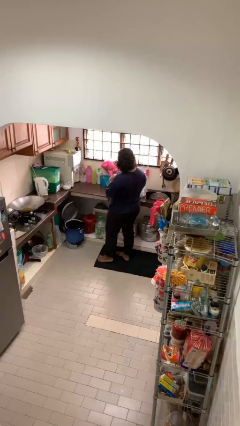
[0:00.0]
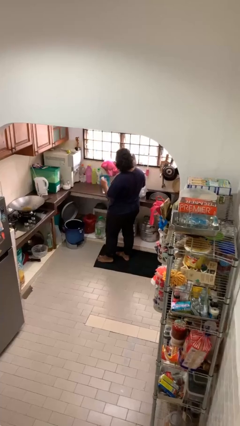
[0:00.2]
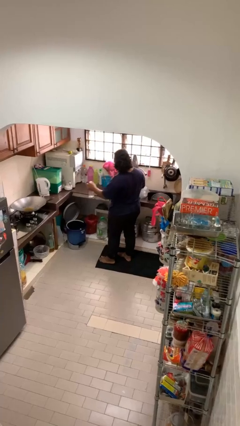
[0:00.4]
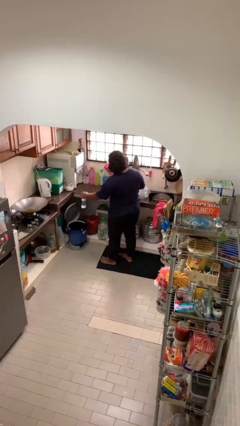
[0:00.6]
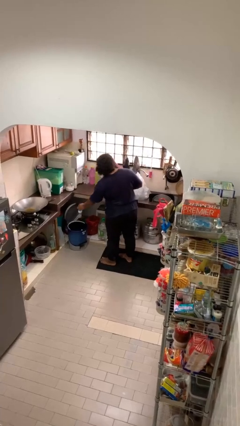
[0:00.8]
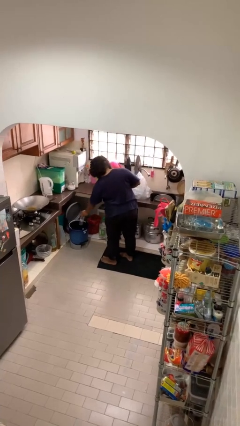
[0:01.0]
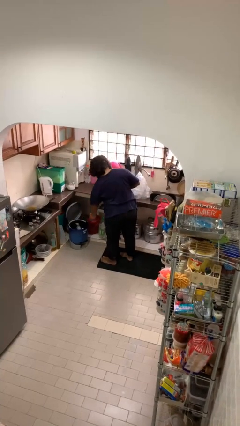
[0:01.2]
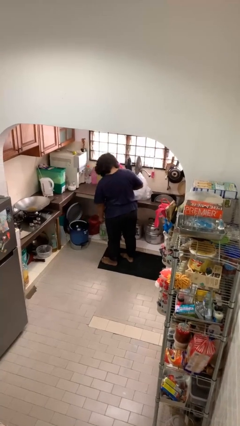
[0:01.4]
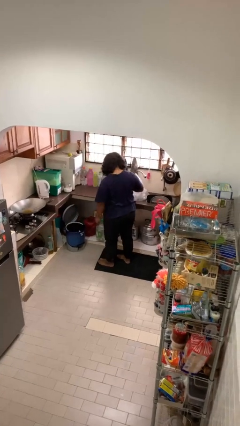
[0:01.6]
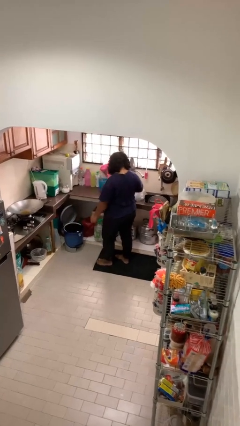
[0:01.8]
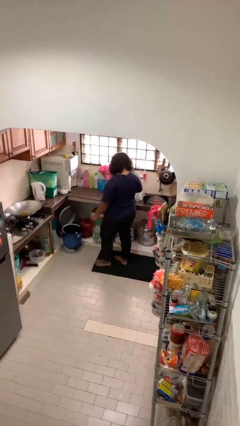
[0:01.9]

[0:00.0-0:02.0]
person discards trash

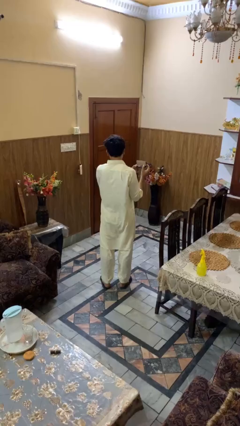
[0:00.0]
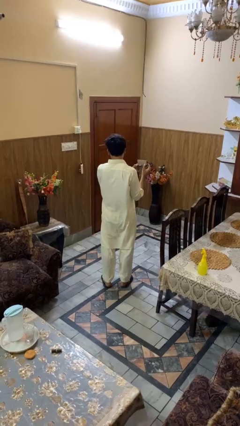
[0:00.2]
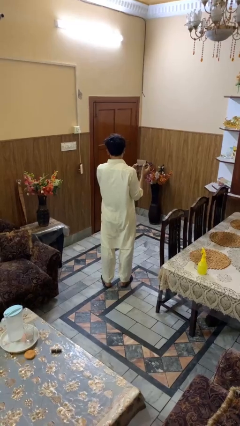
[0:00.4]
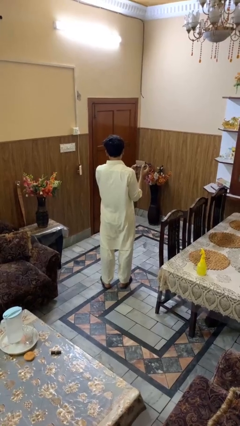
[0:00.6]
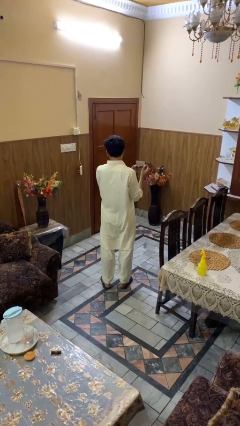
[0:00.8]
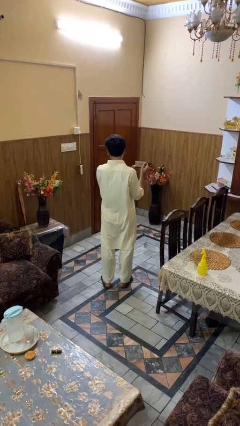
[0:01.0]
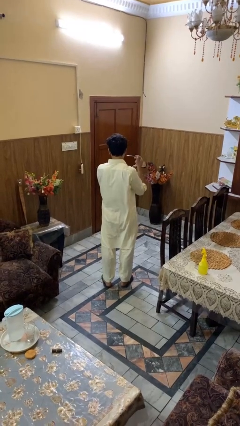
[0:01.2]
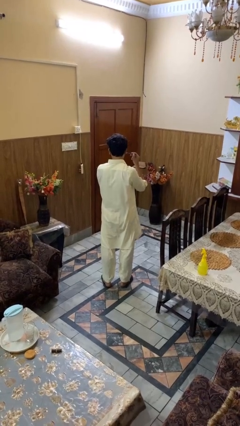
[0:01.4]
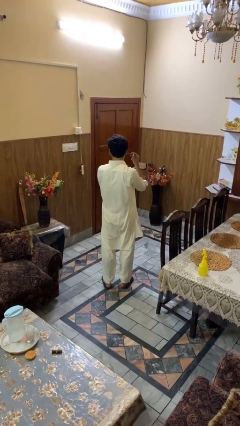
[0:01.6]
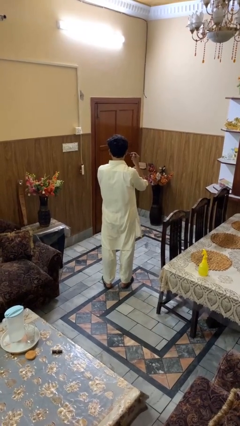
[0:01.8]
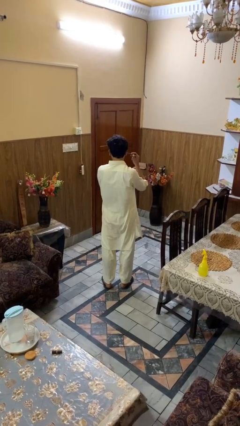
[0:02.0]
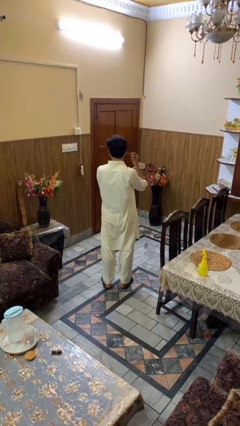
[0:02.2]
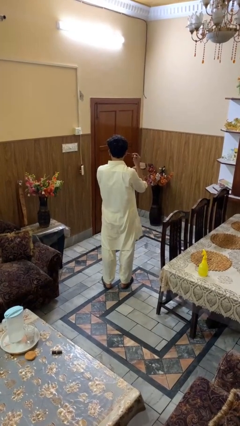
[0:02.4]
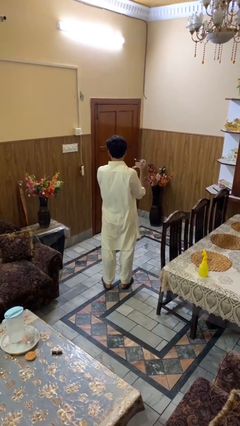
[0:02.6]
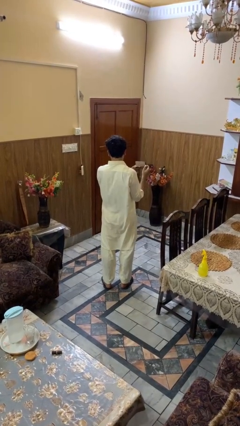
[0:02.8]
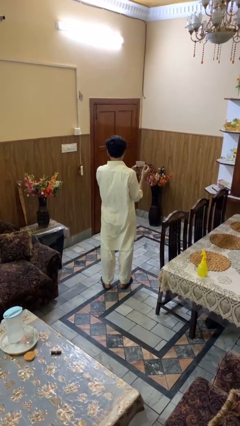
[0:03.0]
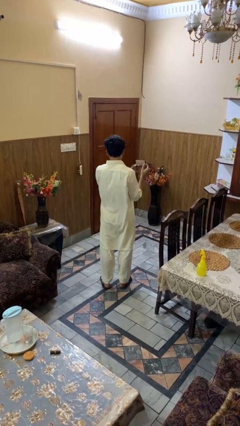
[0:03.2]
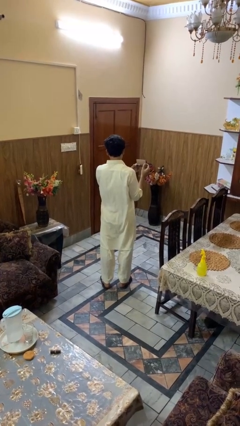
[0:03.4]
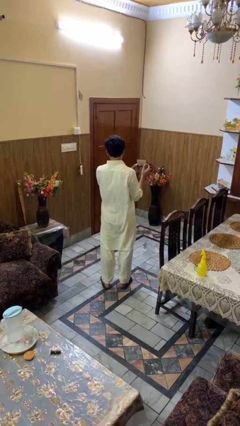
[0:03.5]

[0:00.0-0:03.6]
person applies eye makeup

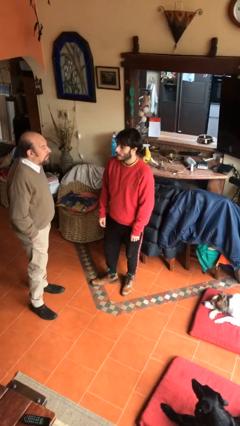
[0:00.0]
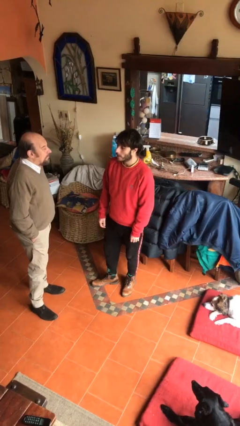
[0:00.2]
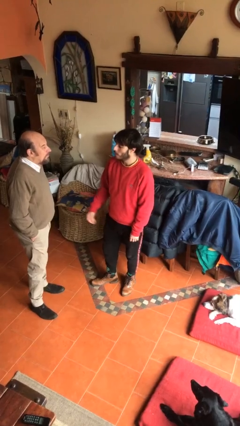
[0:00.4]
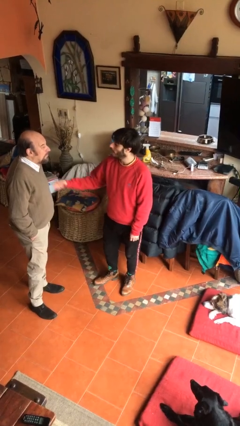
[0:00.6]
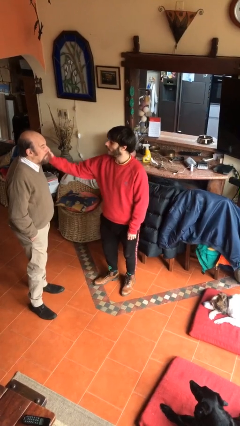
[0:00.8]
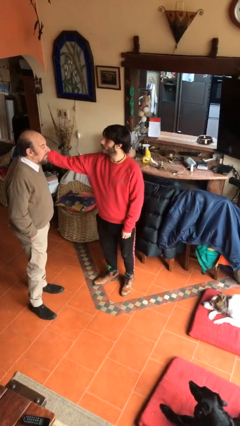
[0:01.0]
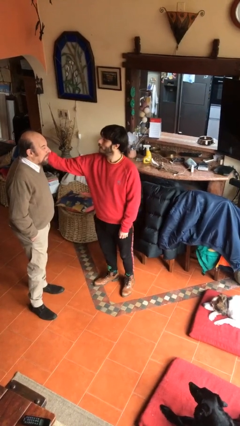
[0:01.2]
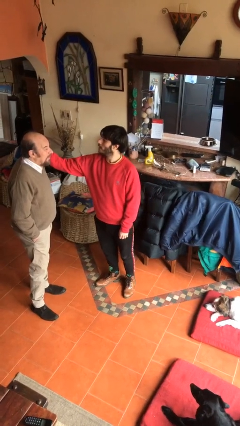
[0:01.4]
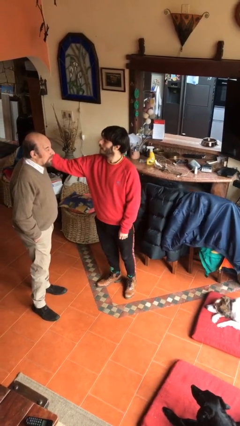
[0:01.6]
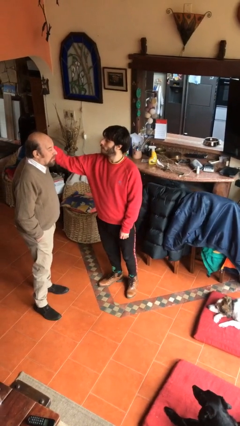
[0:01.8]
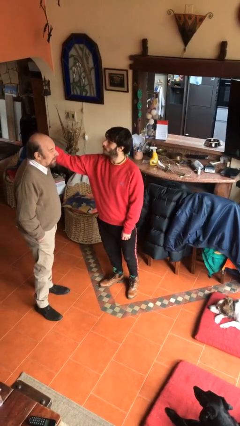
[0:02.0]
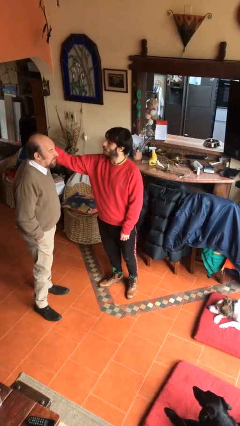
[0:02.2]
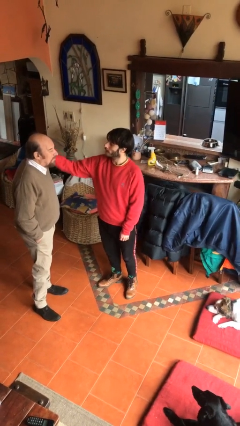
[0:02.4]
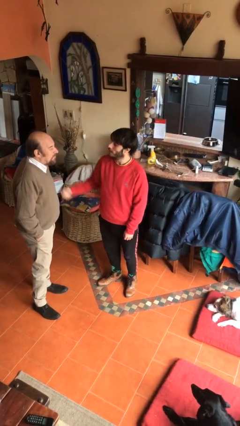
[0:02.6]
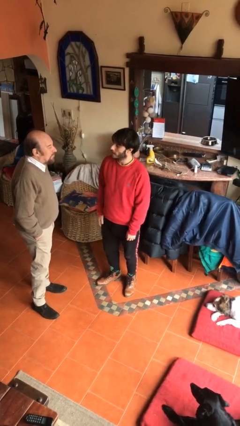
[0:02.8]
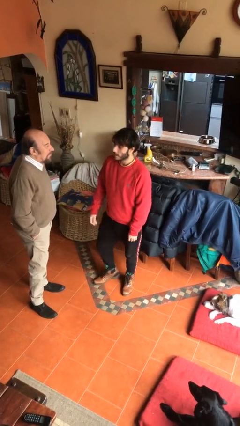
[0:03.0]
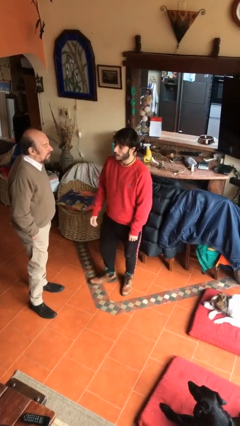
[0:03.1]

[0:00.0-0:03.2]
person touches face of person

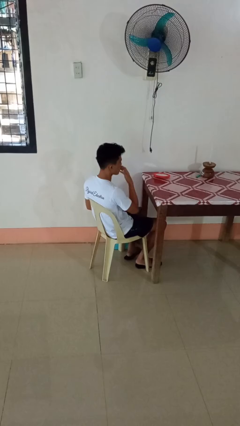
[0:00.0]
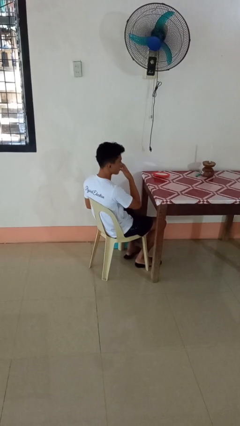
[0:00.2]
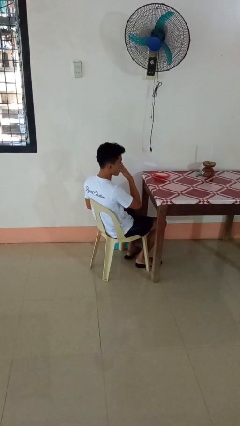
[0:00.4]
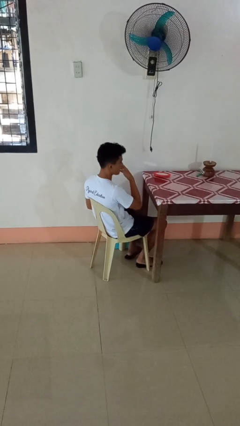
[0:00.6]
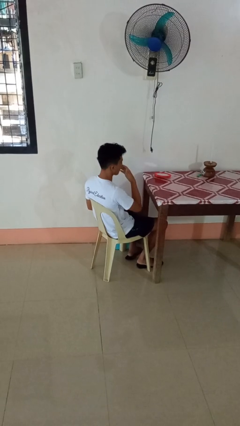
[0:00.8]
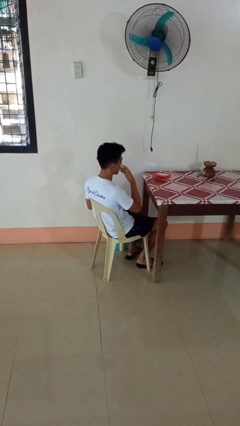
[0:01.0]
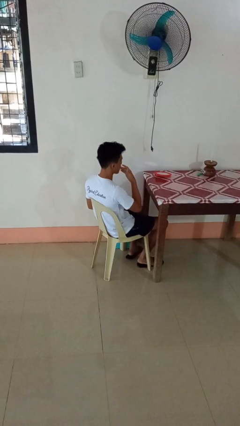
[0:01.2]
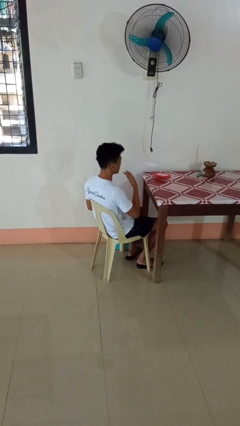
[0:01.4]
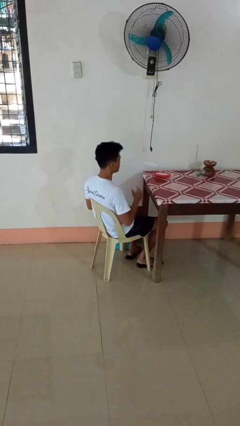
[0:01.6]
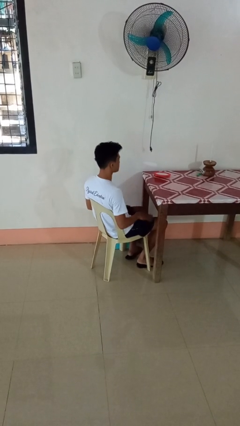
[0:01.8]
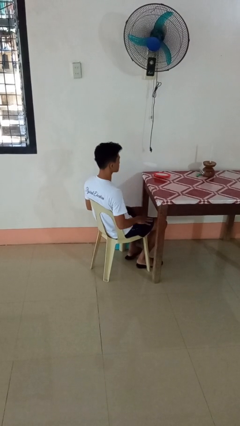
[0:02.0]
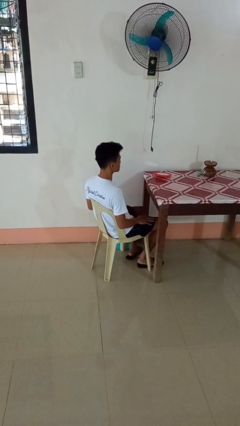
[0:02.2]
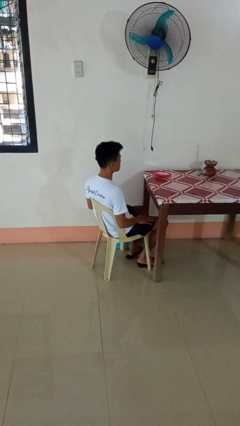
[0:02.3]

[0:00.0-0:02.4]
person licks fingers

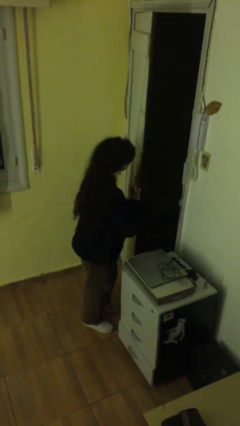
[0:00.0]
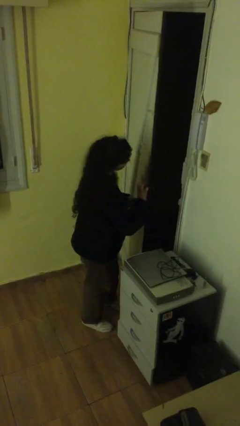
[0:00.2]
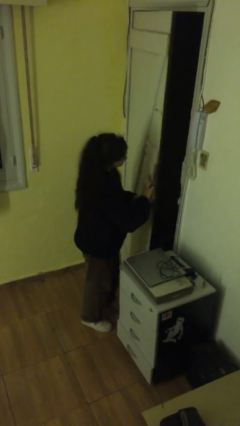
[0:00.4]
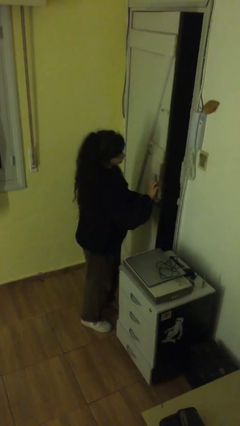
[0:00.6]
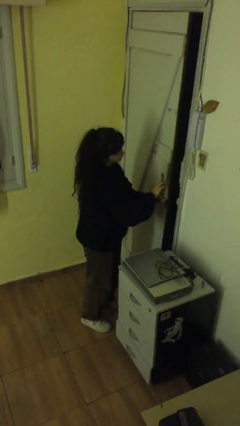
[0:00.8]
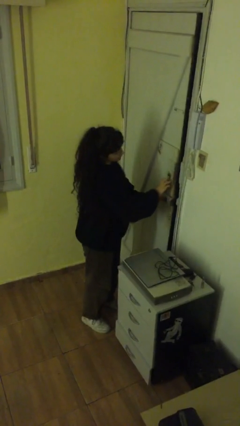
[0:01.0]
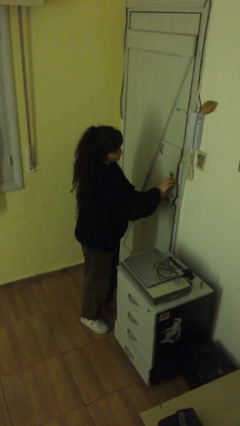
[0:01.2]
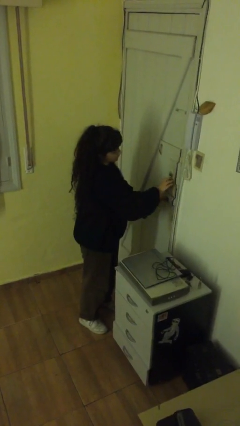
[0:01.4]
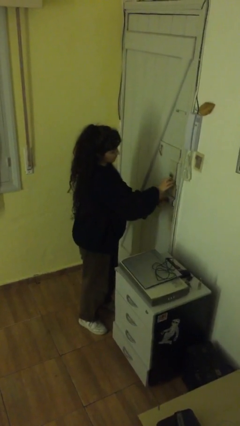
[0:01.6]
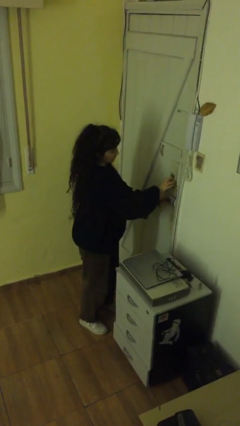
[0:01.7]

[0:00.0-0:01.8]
person closes facility door

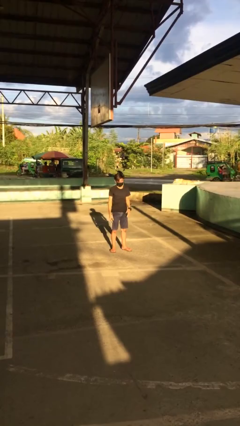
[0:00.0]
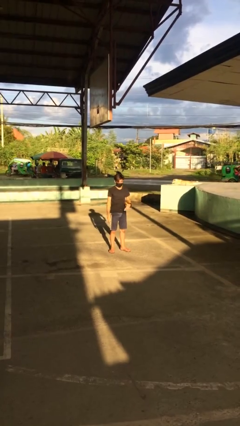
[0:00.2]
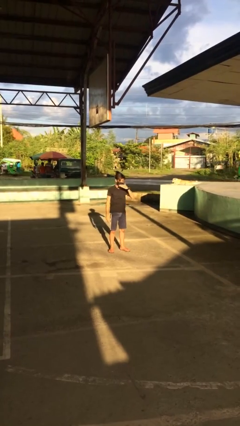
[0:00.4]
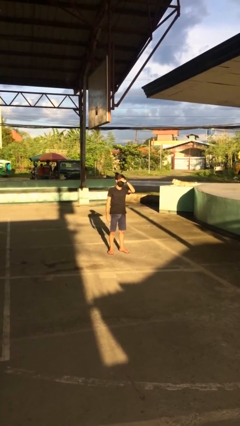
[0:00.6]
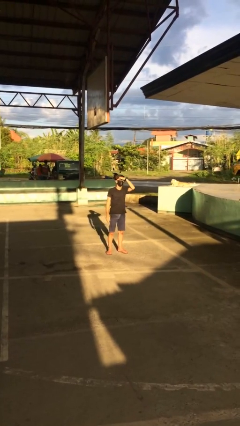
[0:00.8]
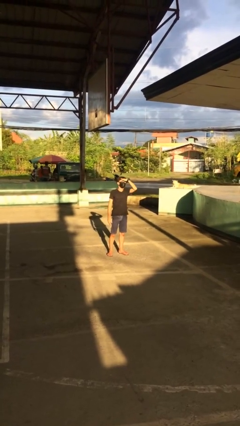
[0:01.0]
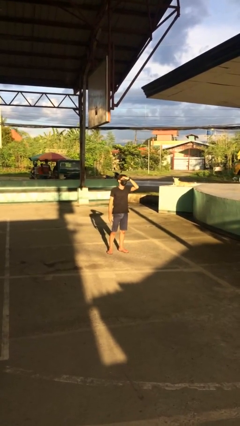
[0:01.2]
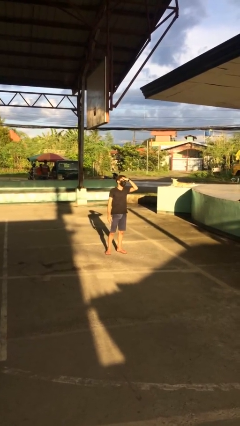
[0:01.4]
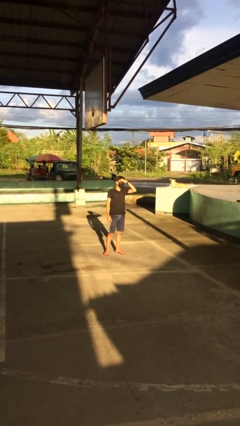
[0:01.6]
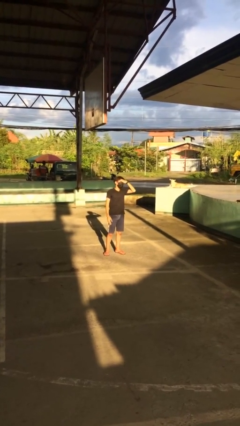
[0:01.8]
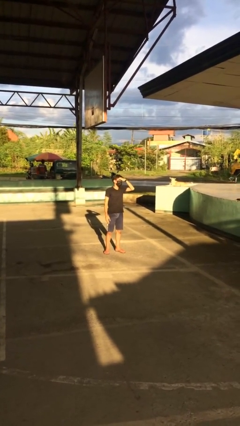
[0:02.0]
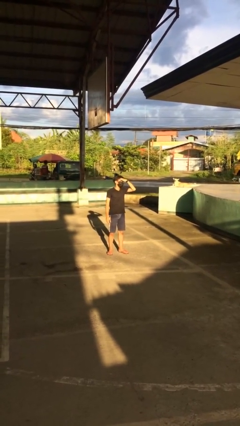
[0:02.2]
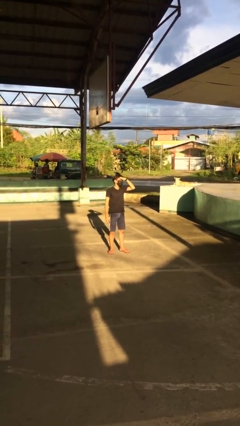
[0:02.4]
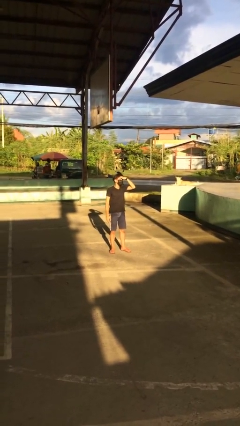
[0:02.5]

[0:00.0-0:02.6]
person shades eyes

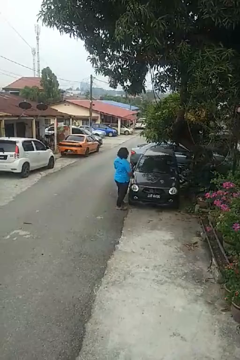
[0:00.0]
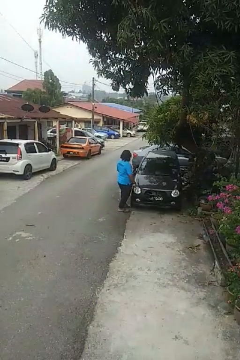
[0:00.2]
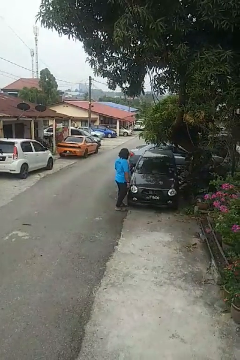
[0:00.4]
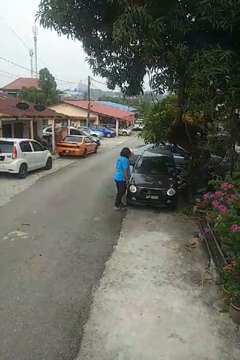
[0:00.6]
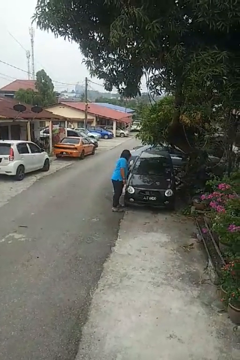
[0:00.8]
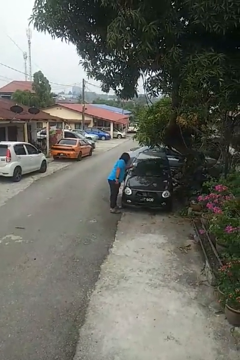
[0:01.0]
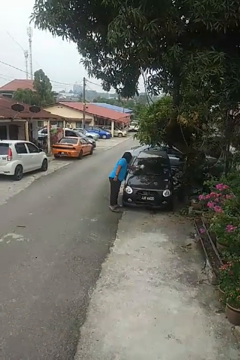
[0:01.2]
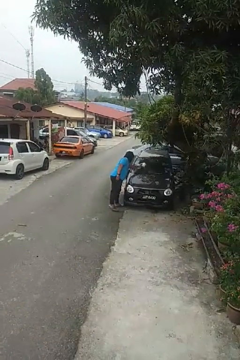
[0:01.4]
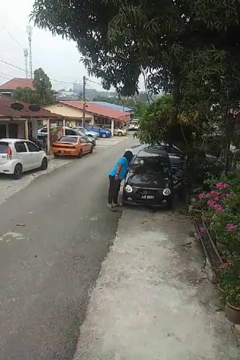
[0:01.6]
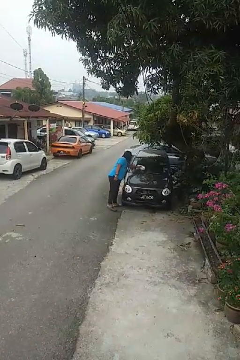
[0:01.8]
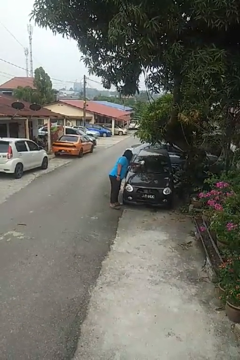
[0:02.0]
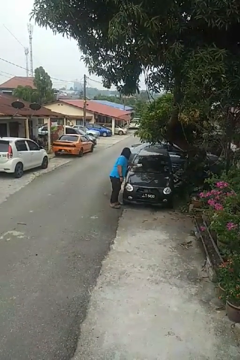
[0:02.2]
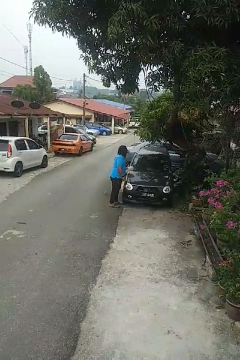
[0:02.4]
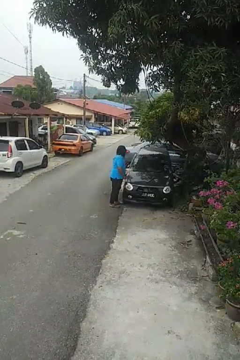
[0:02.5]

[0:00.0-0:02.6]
person polishes car with rag
